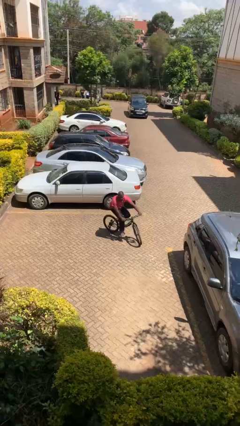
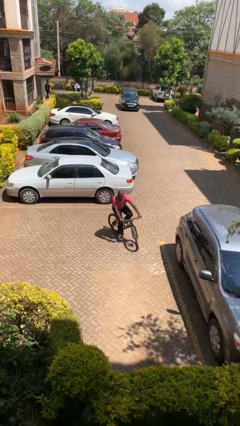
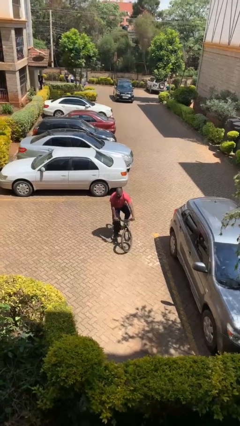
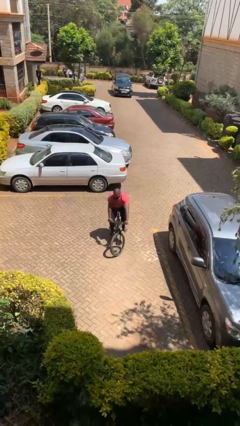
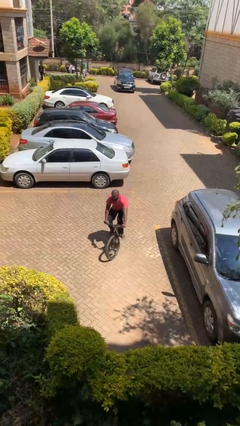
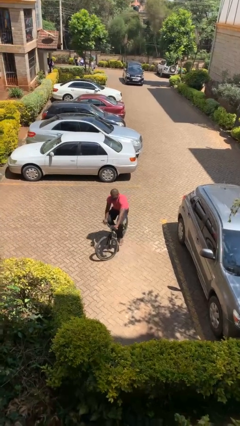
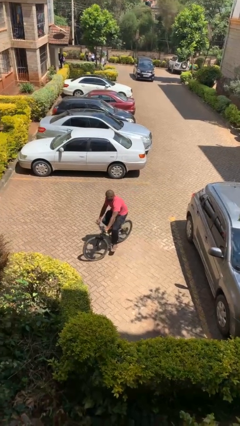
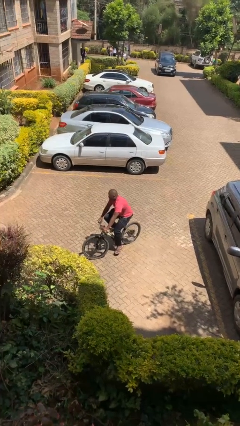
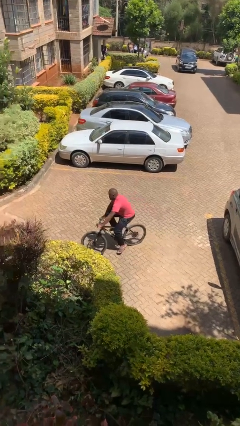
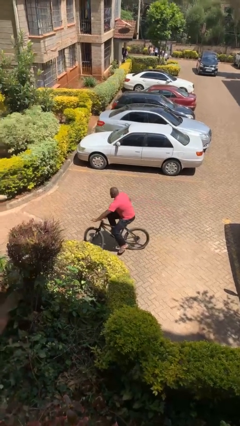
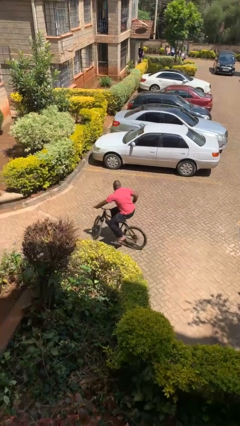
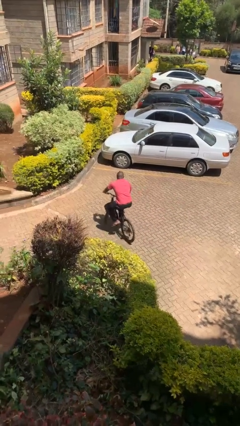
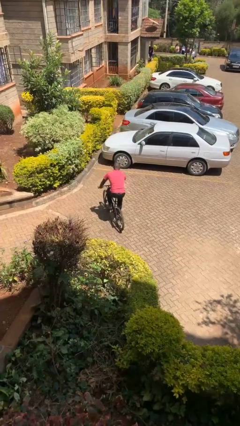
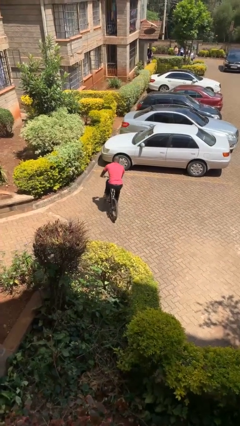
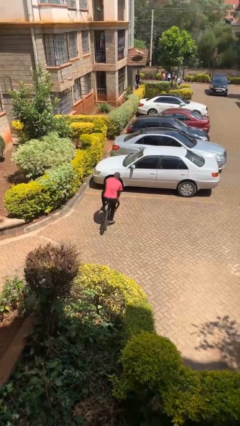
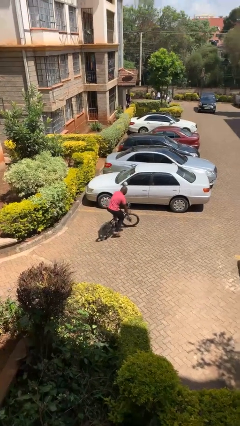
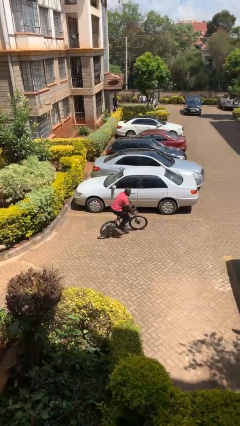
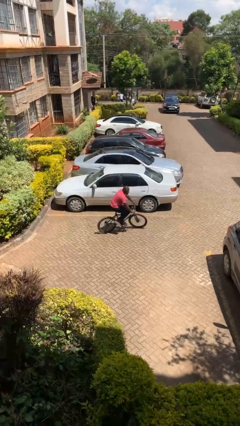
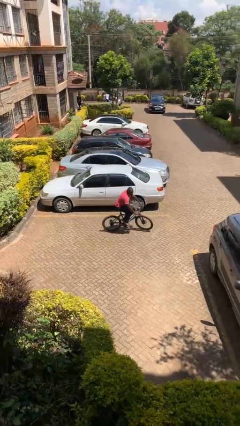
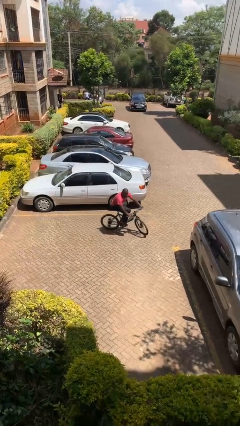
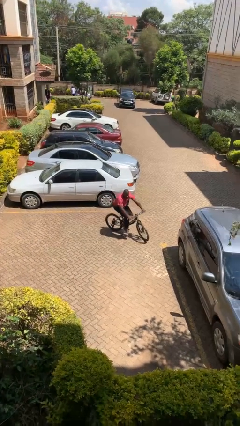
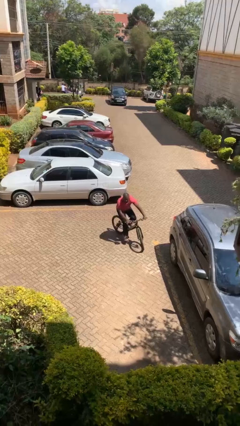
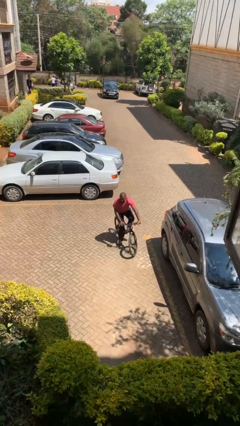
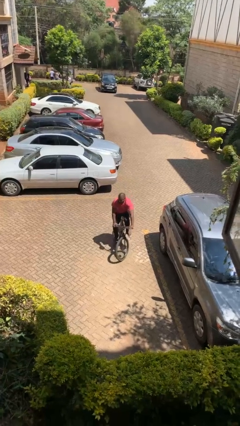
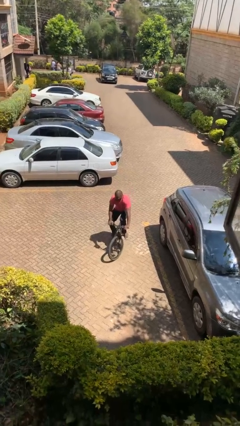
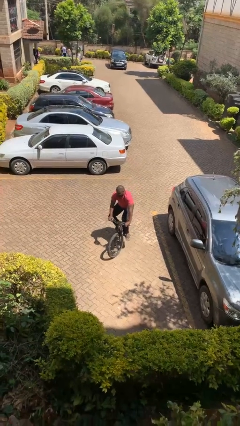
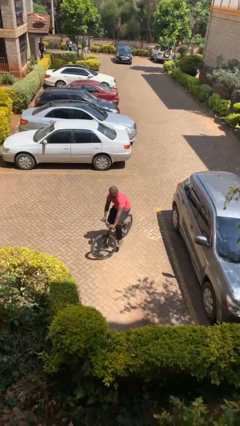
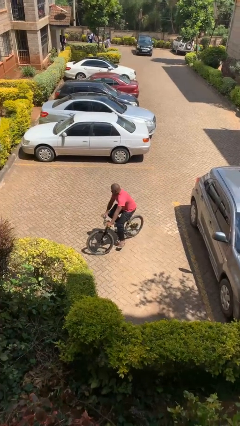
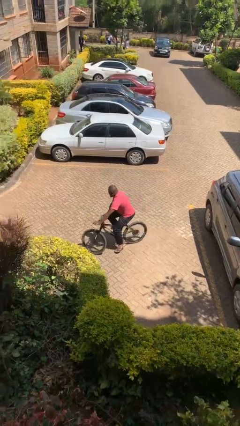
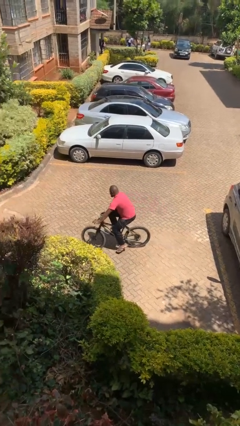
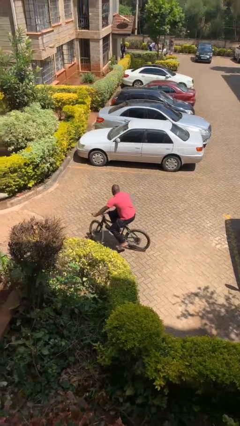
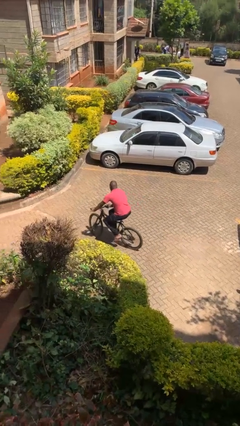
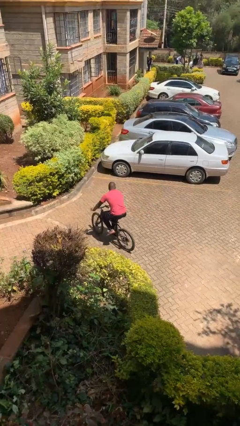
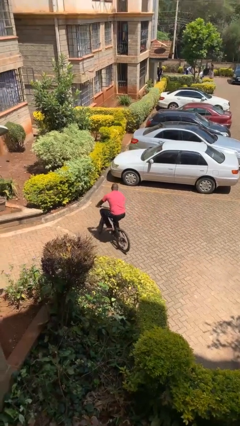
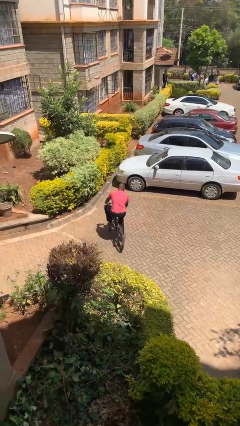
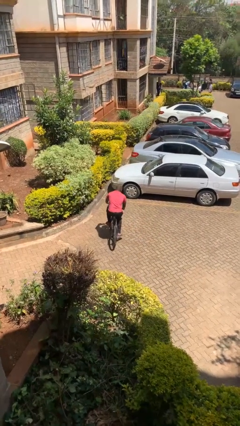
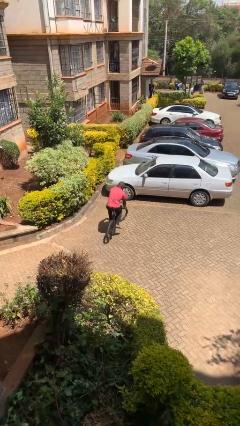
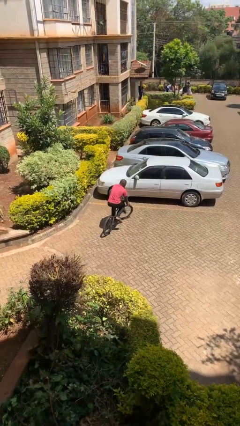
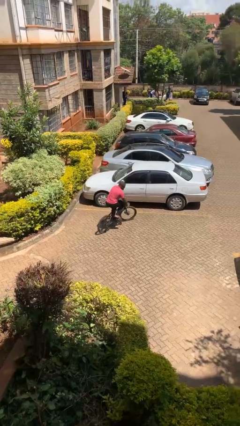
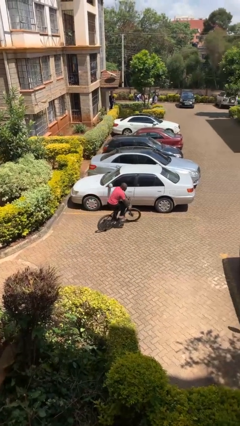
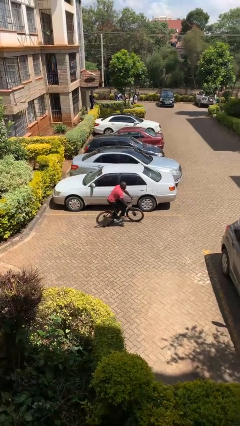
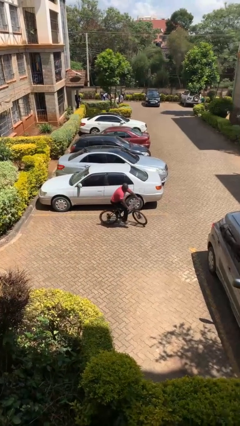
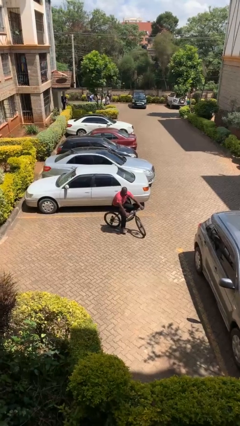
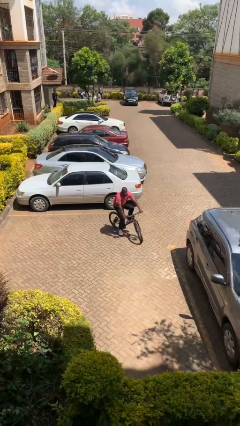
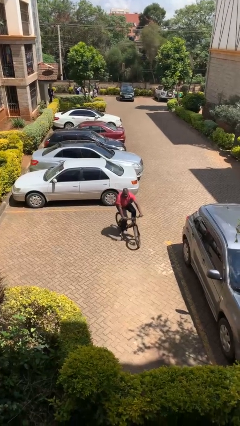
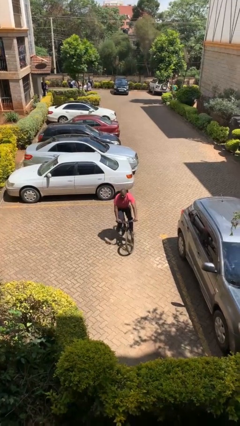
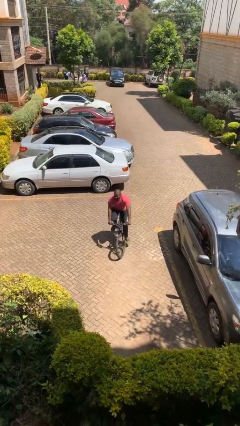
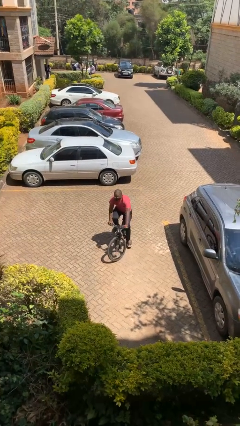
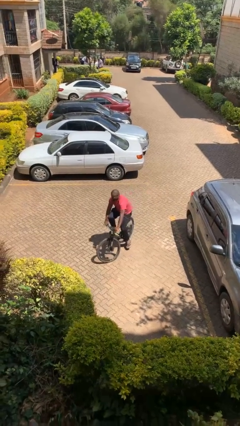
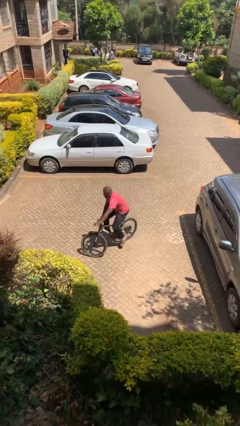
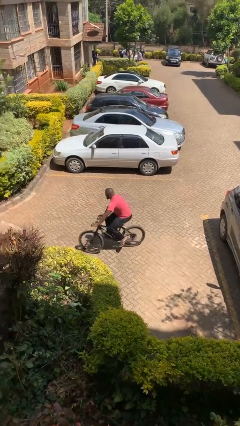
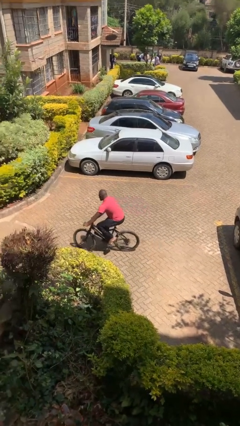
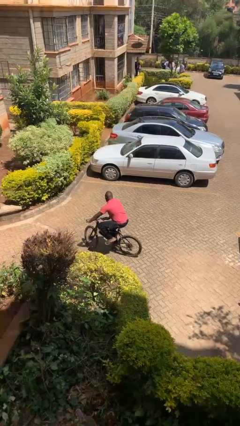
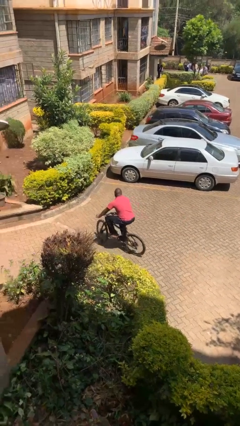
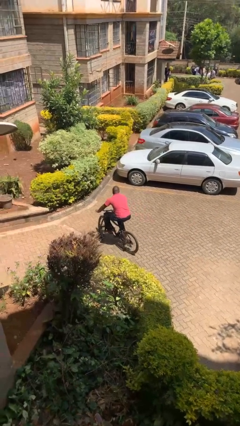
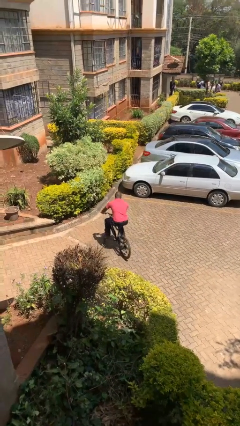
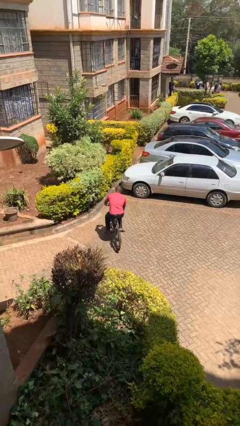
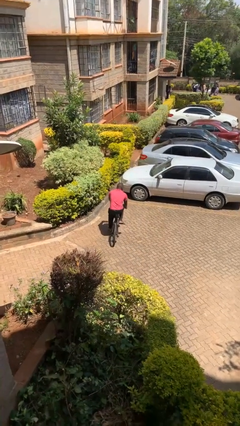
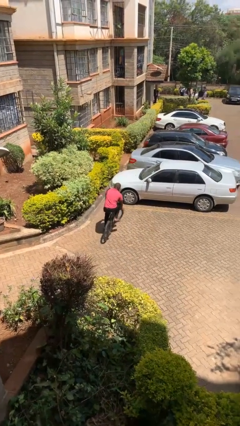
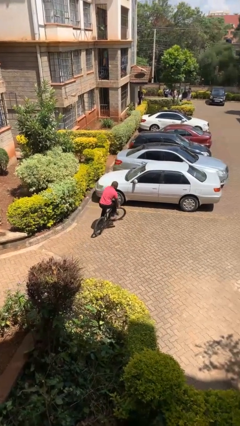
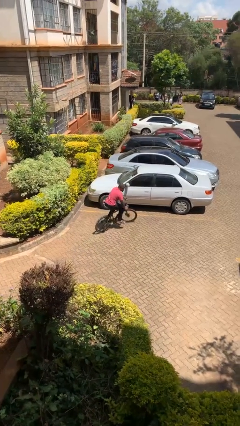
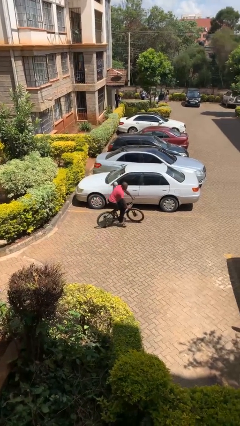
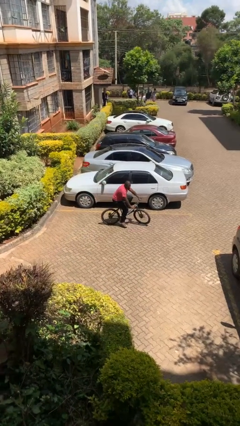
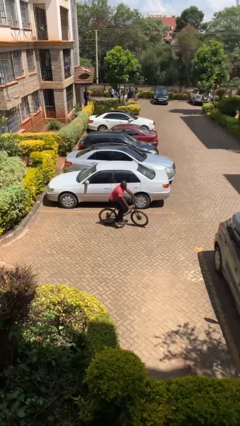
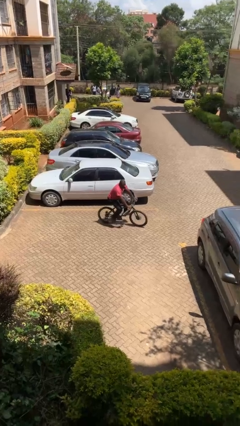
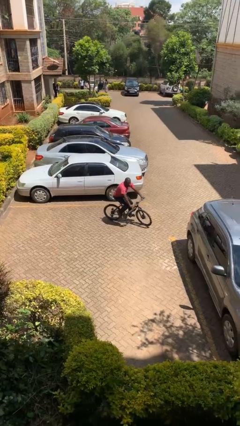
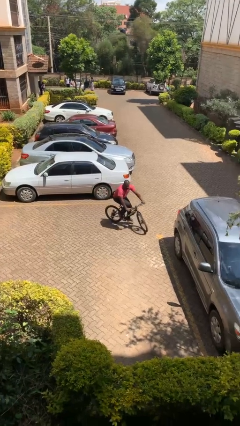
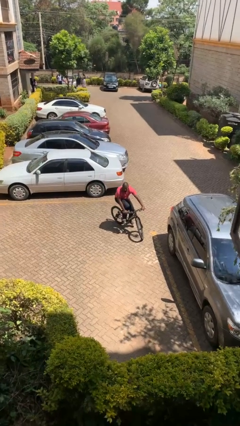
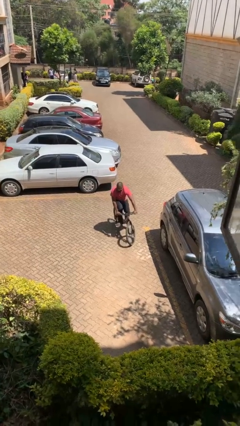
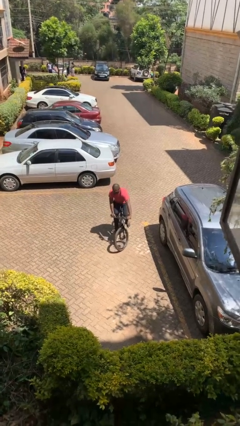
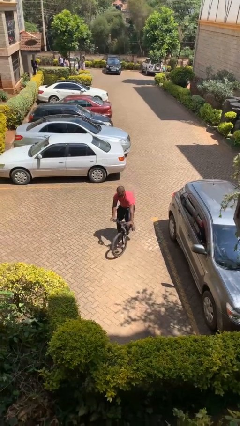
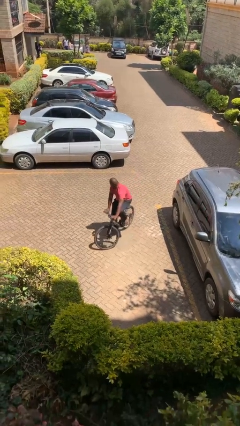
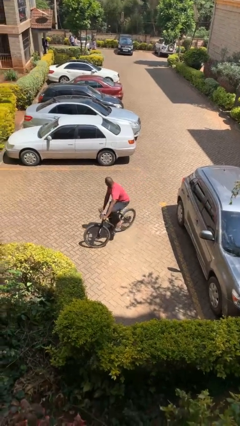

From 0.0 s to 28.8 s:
person rides bicycle

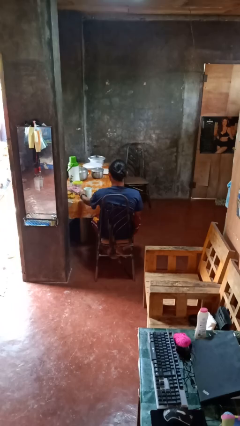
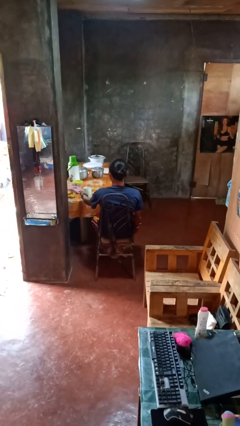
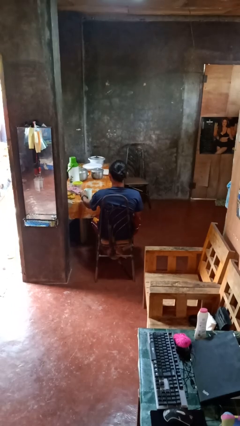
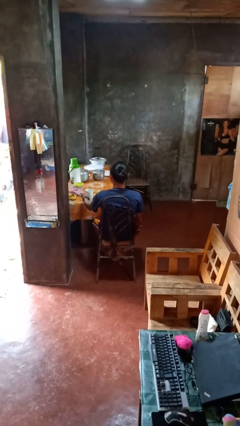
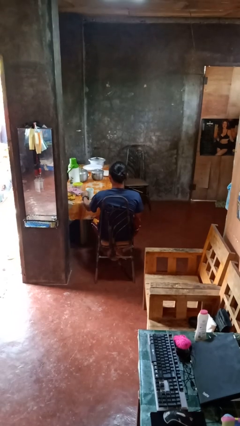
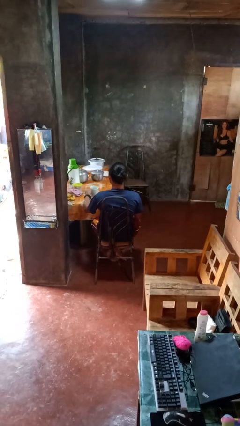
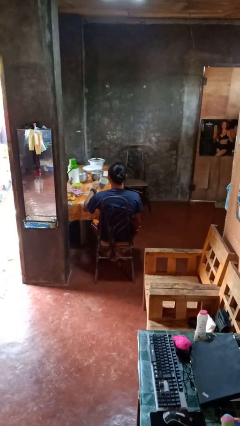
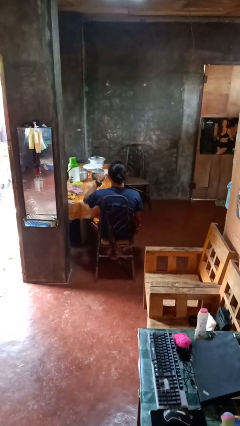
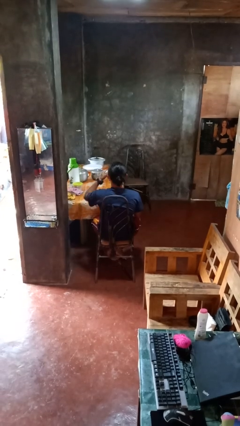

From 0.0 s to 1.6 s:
person picks up object from table

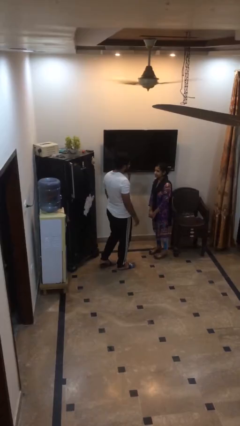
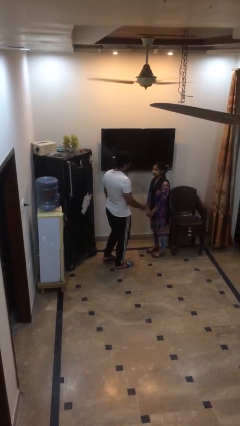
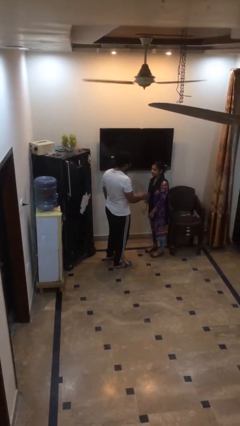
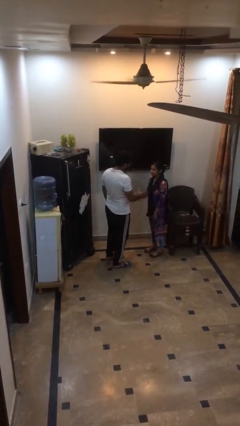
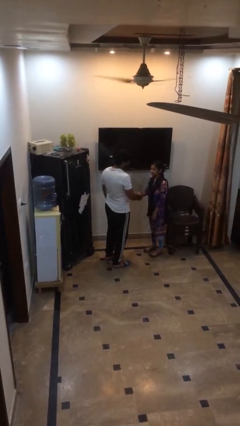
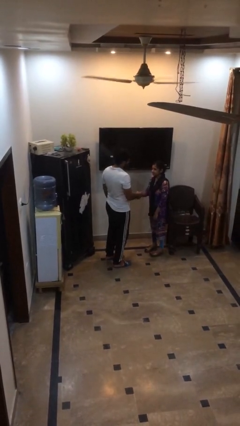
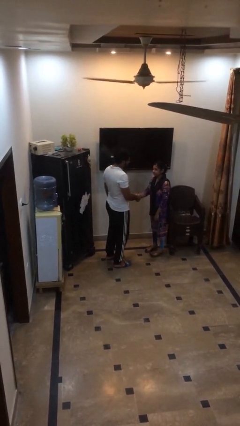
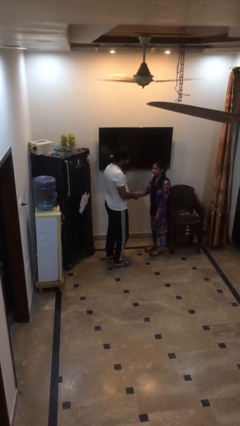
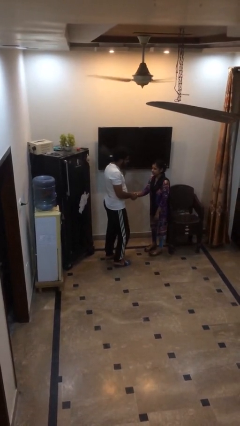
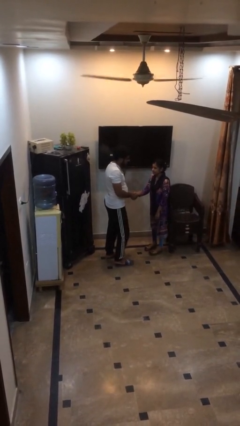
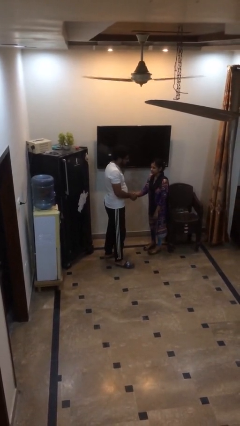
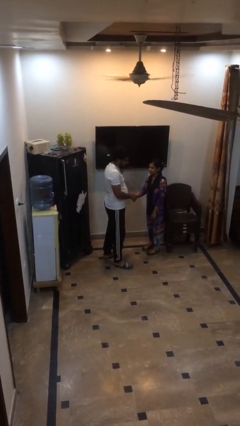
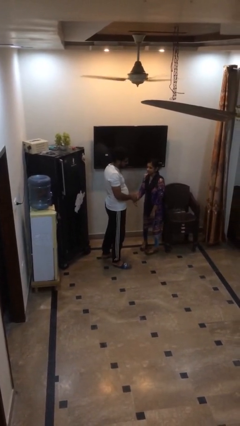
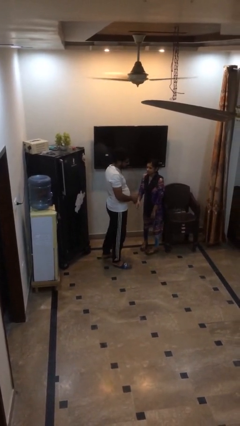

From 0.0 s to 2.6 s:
person shakes hand
